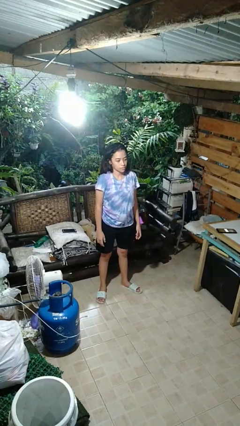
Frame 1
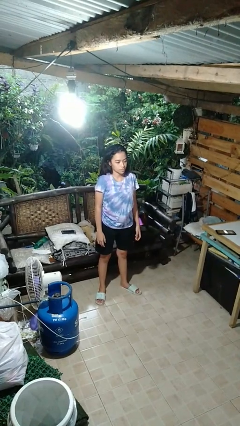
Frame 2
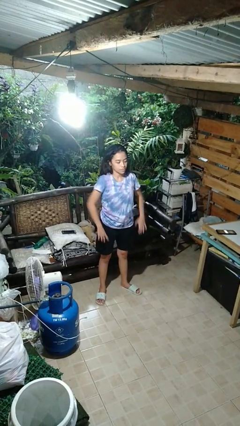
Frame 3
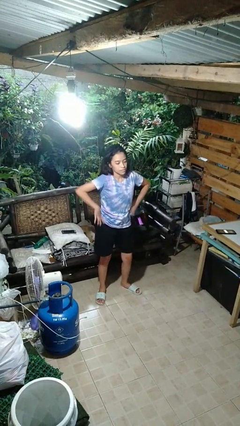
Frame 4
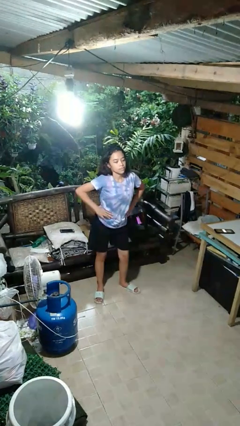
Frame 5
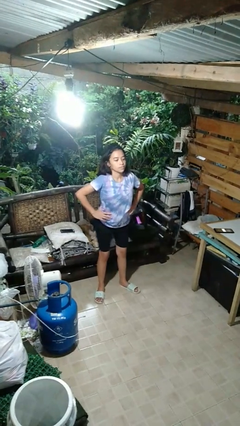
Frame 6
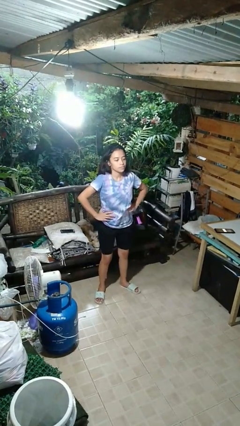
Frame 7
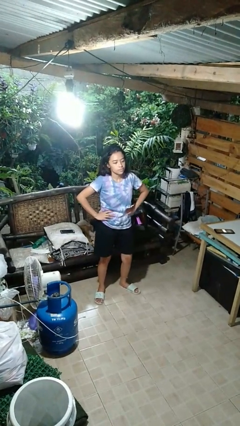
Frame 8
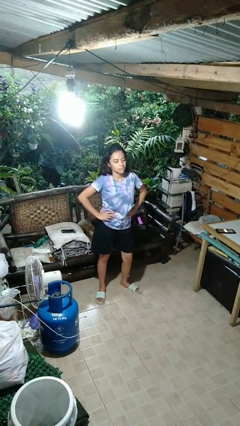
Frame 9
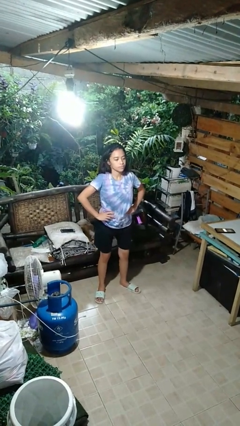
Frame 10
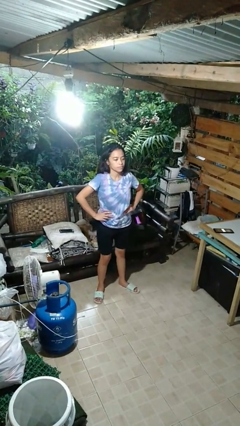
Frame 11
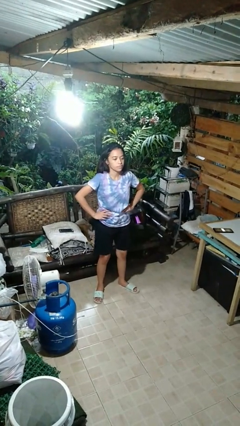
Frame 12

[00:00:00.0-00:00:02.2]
person wiggles hips

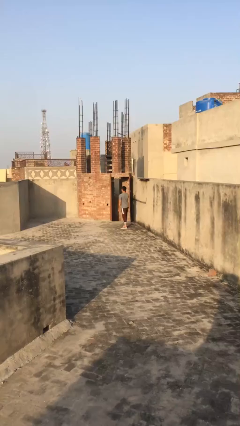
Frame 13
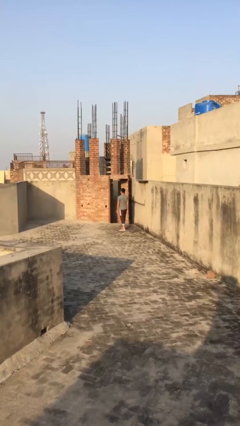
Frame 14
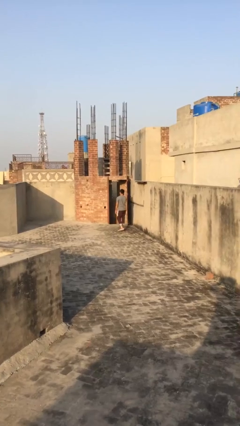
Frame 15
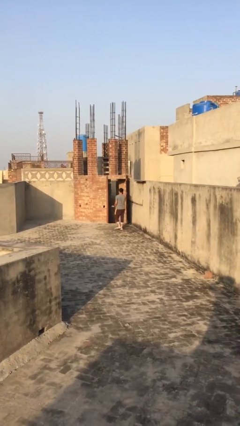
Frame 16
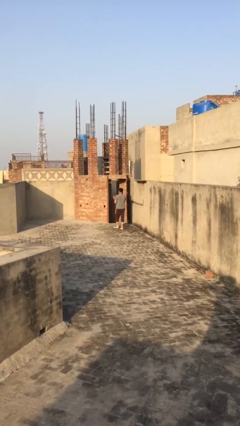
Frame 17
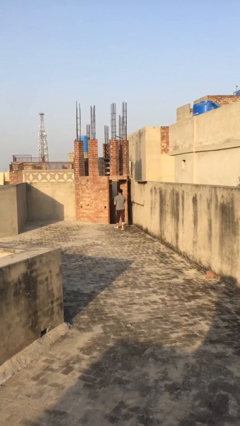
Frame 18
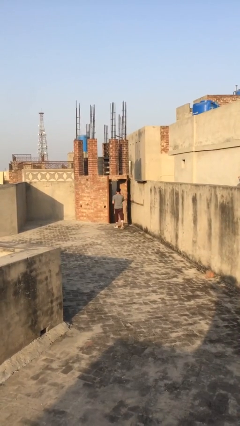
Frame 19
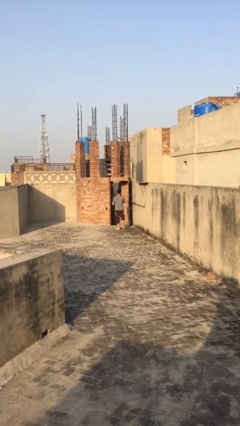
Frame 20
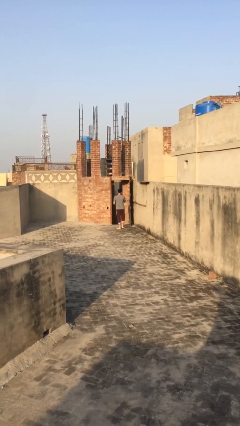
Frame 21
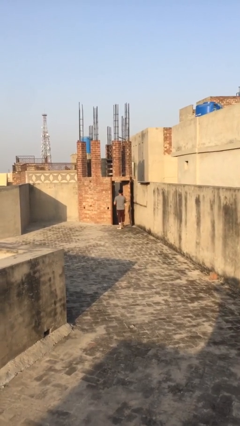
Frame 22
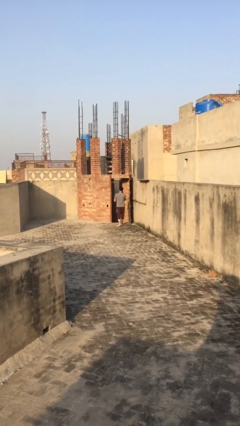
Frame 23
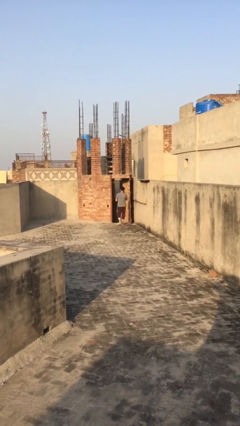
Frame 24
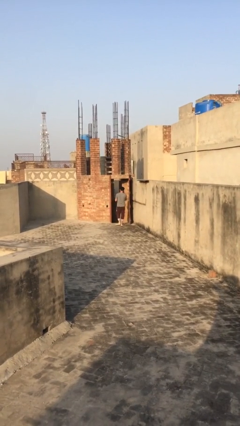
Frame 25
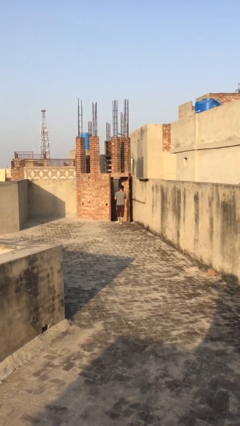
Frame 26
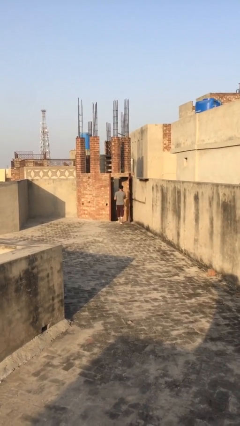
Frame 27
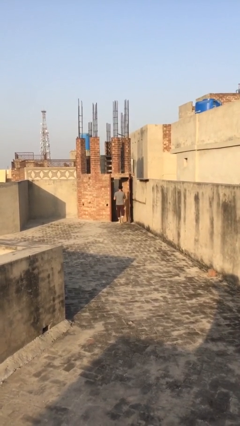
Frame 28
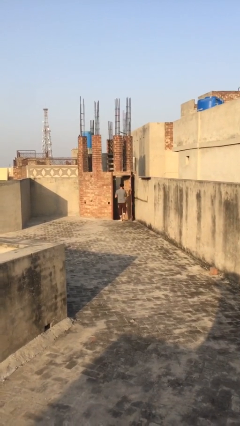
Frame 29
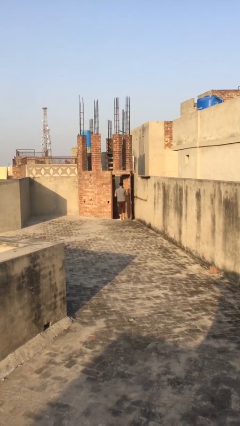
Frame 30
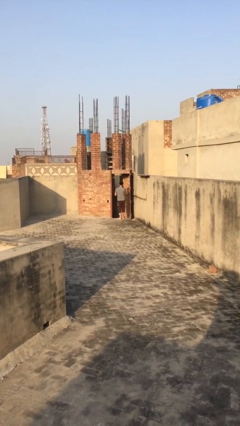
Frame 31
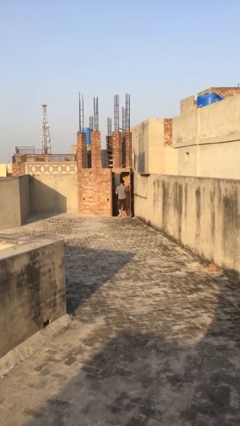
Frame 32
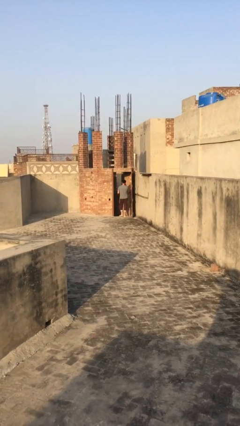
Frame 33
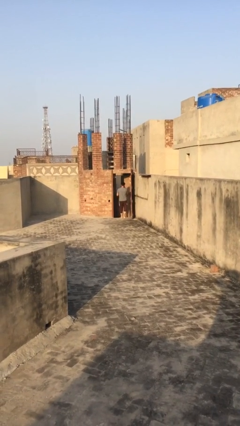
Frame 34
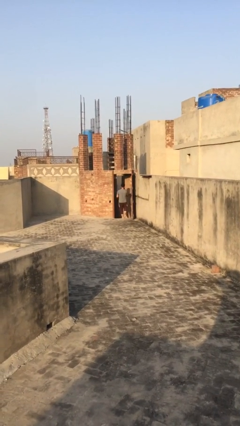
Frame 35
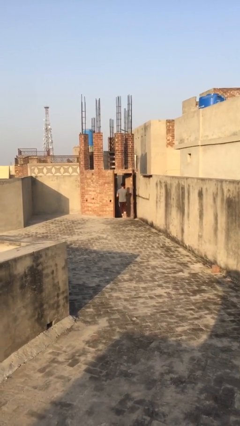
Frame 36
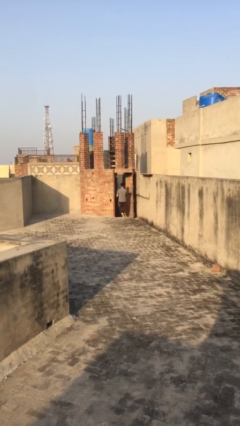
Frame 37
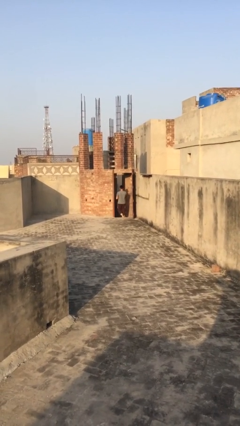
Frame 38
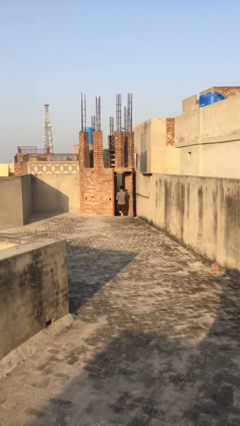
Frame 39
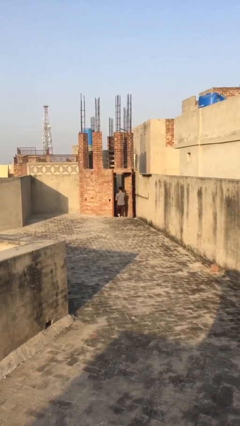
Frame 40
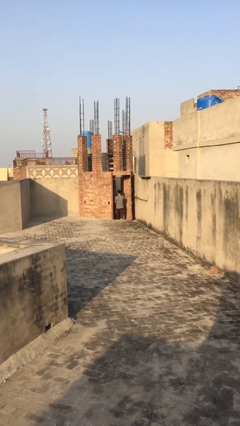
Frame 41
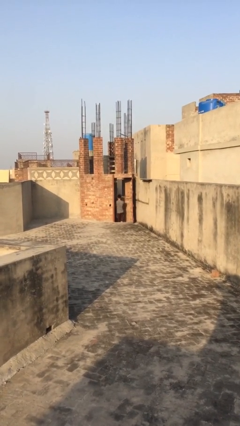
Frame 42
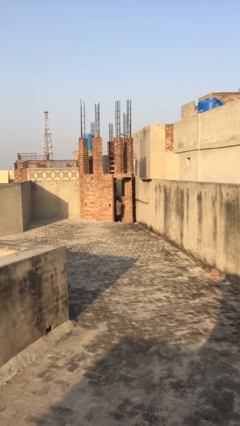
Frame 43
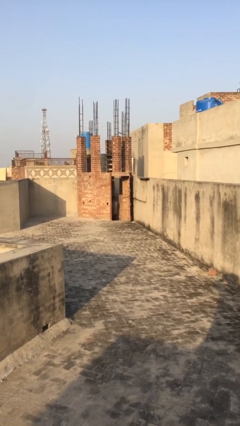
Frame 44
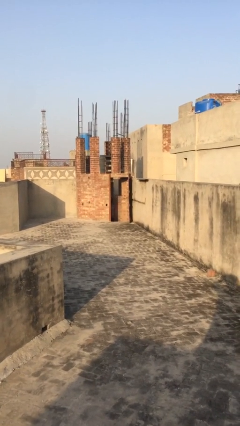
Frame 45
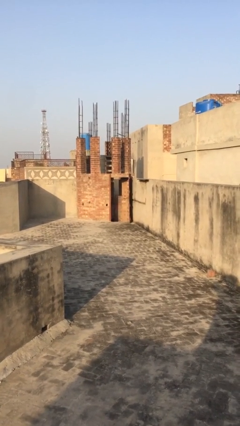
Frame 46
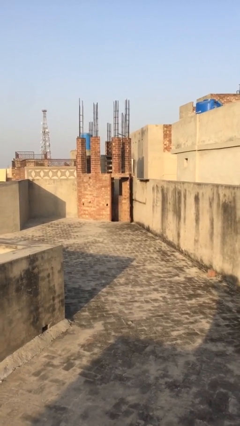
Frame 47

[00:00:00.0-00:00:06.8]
person exits scene through structure

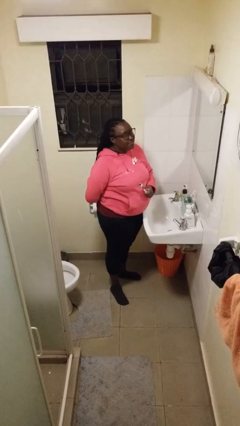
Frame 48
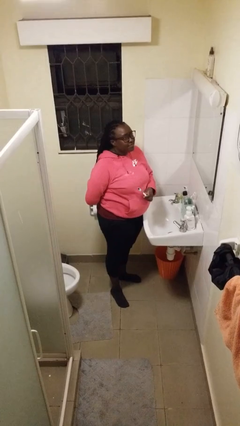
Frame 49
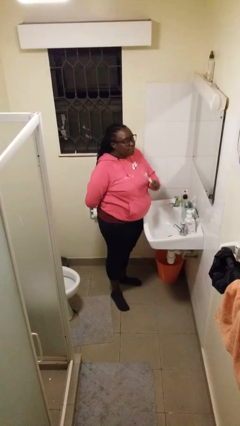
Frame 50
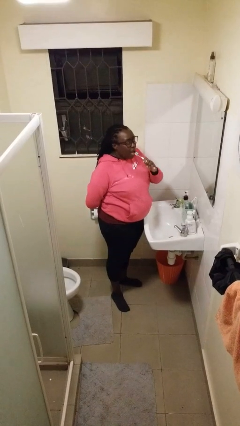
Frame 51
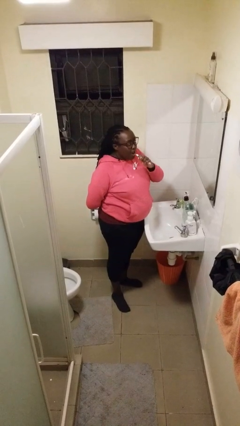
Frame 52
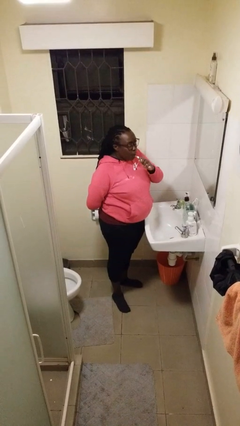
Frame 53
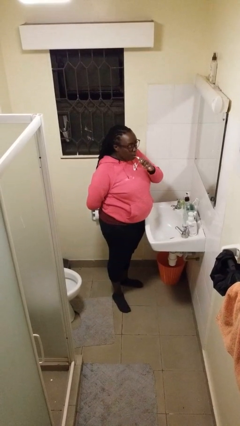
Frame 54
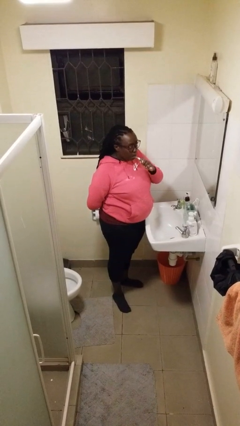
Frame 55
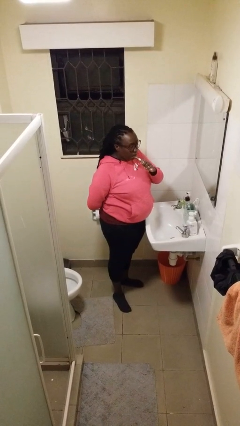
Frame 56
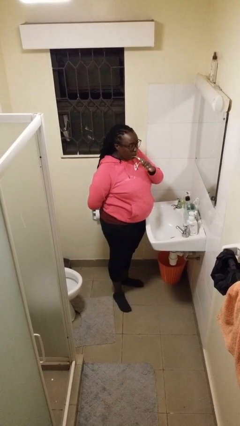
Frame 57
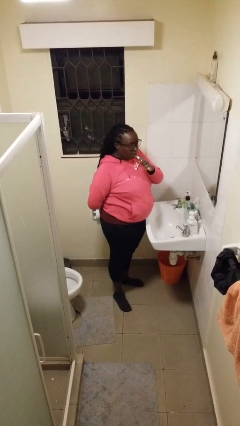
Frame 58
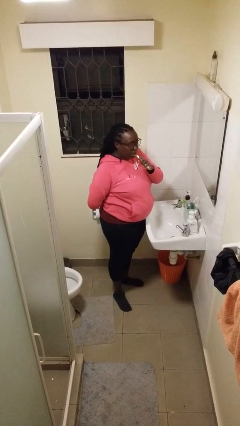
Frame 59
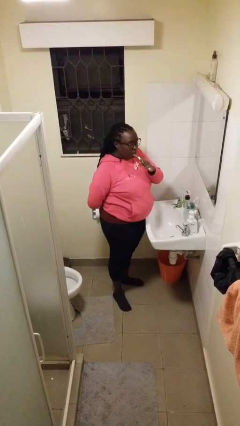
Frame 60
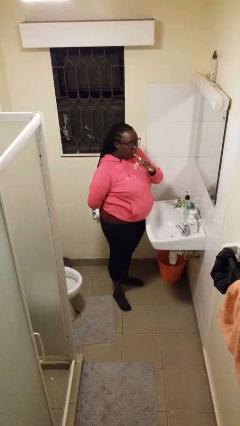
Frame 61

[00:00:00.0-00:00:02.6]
person brushes teeth

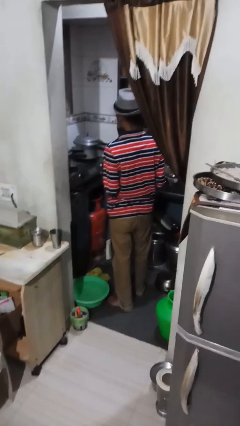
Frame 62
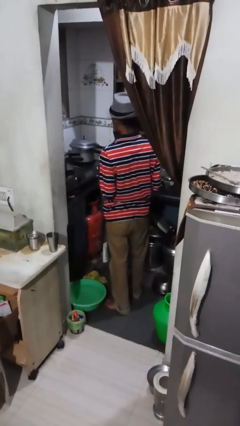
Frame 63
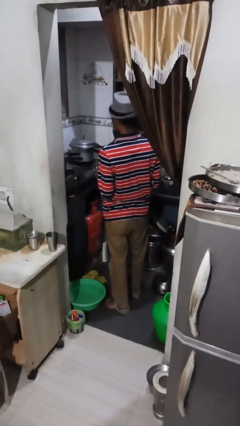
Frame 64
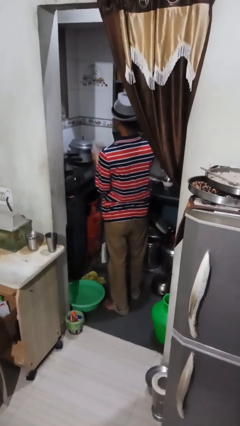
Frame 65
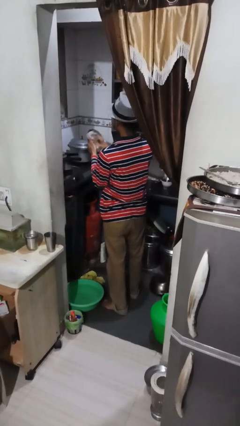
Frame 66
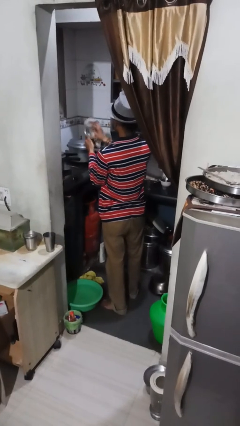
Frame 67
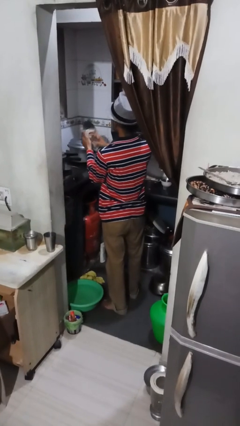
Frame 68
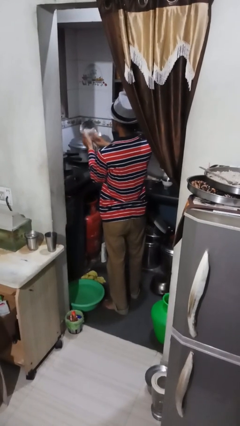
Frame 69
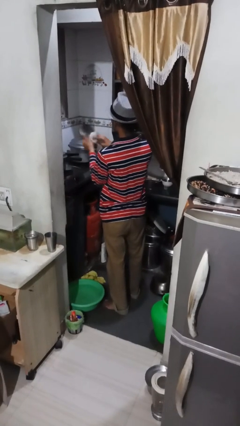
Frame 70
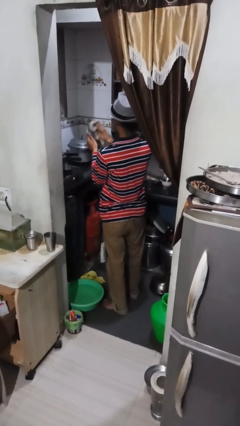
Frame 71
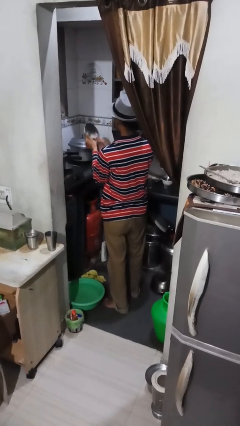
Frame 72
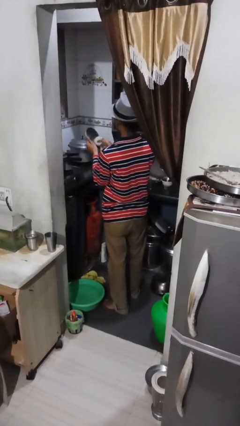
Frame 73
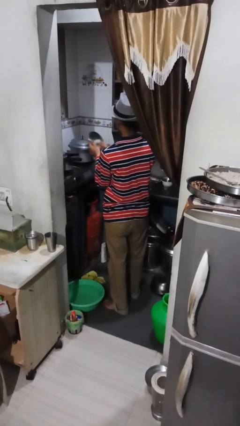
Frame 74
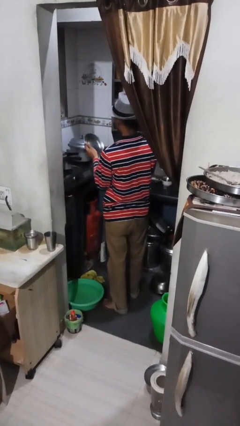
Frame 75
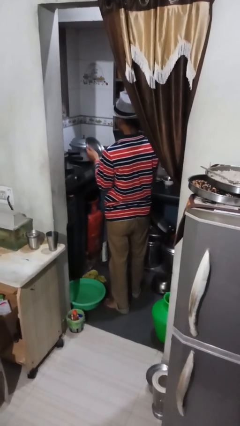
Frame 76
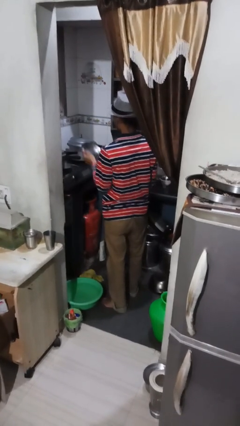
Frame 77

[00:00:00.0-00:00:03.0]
person dries dish

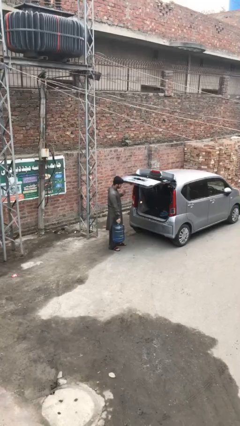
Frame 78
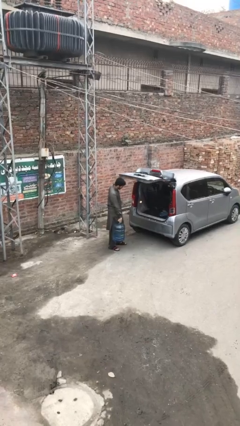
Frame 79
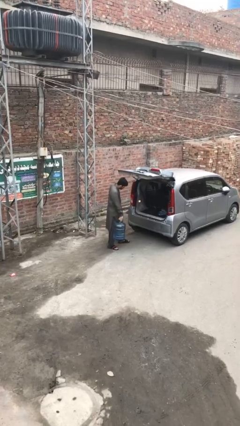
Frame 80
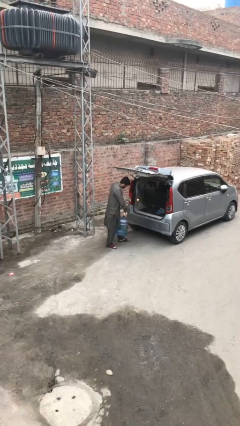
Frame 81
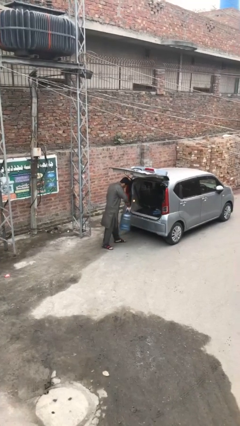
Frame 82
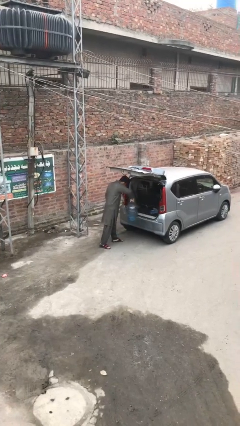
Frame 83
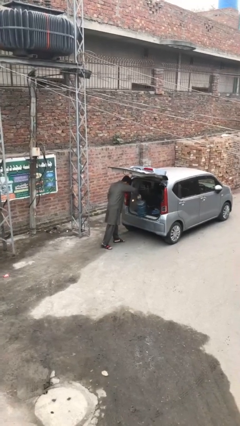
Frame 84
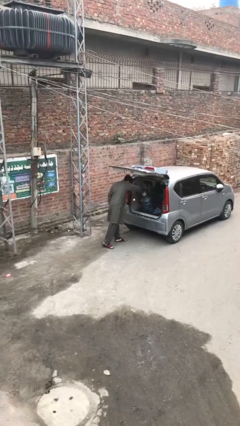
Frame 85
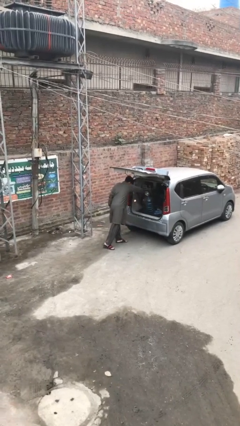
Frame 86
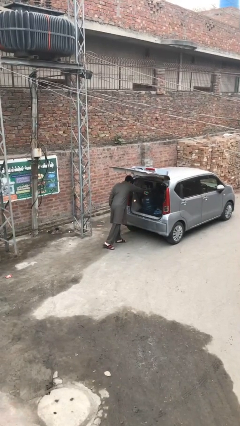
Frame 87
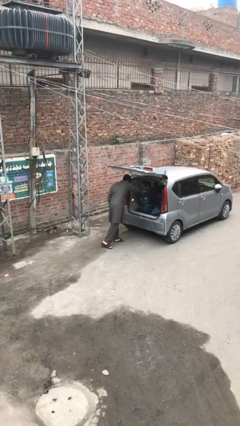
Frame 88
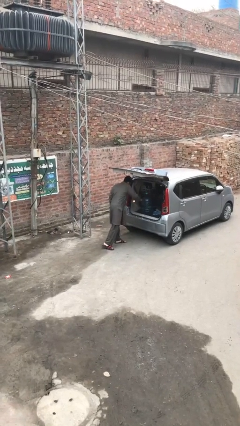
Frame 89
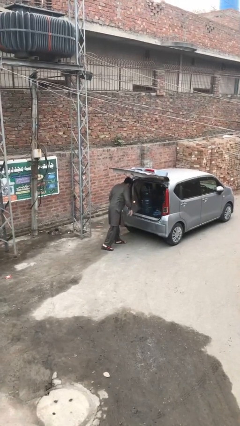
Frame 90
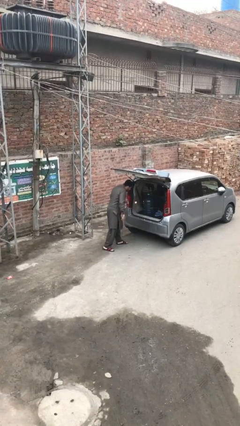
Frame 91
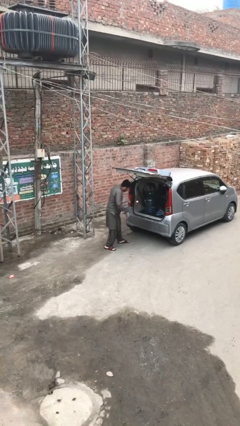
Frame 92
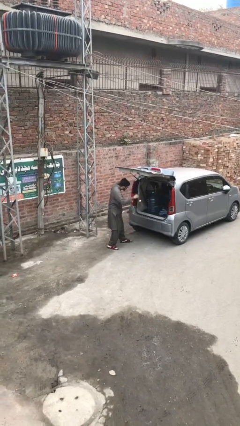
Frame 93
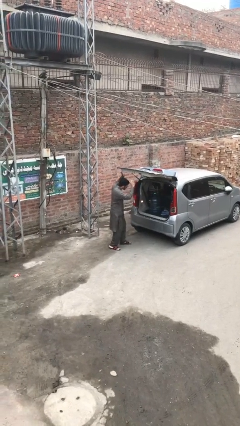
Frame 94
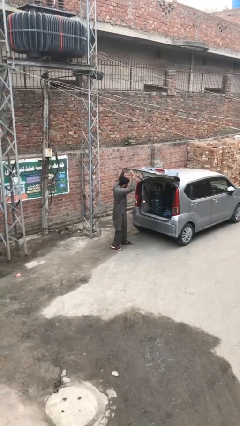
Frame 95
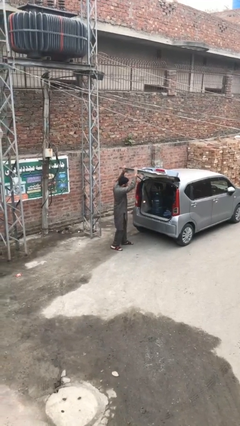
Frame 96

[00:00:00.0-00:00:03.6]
person loads car
